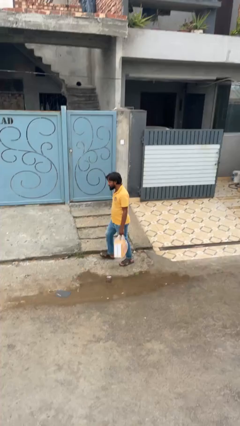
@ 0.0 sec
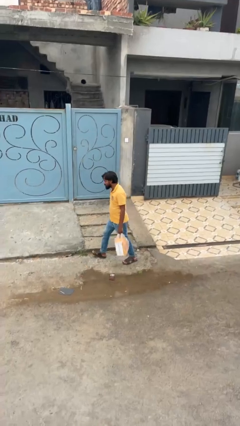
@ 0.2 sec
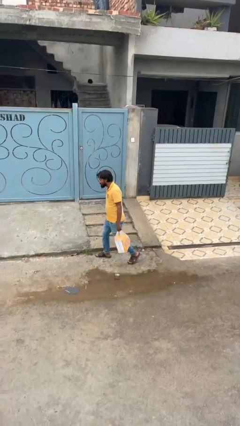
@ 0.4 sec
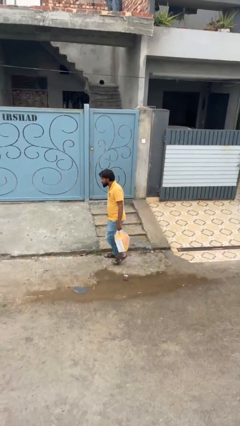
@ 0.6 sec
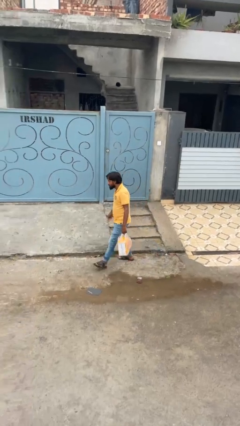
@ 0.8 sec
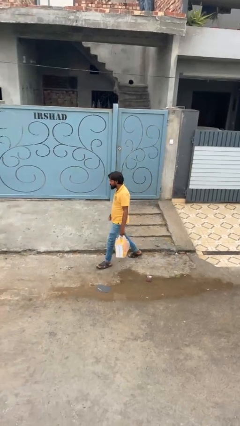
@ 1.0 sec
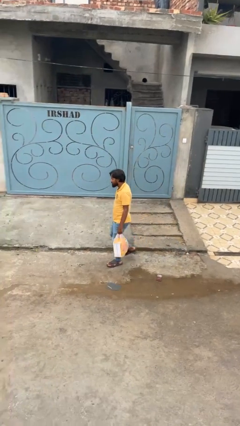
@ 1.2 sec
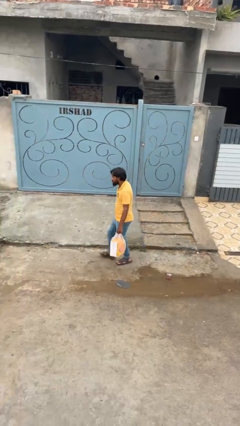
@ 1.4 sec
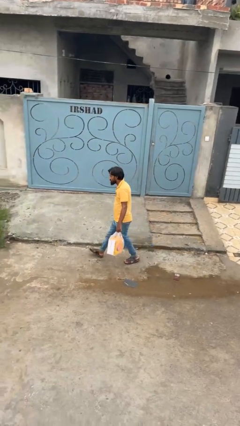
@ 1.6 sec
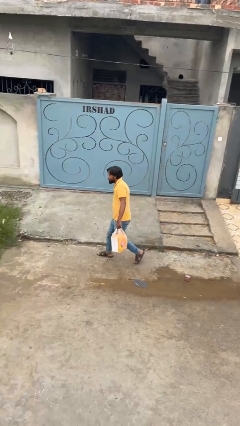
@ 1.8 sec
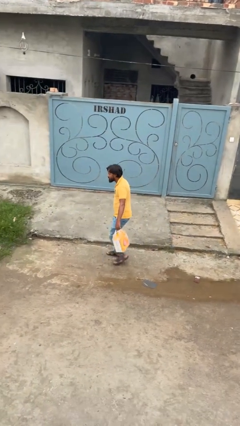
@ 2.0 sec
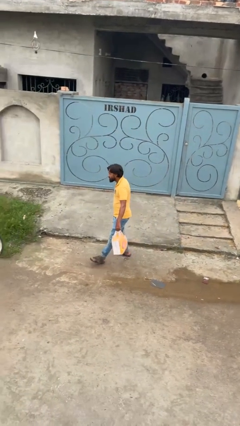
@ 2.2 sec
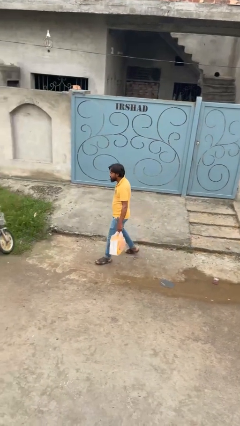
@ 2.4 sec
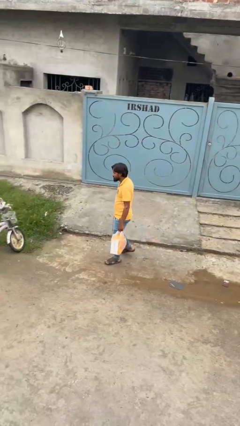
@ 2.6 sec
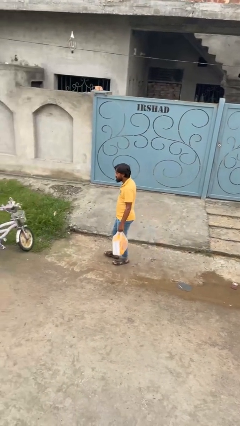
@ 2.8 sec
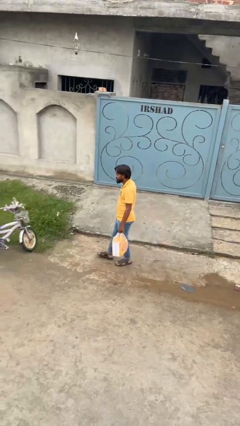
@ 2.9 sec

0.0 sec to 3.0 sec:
person carries groceries

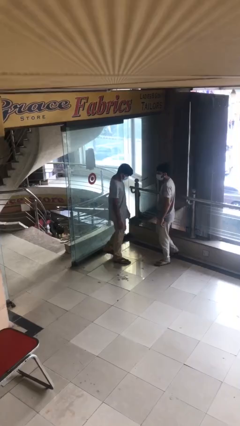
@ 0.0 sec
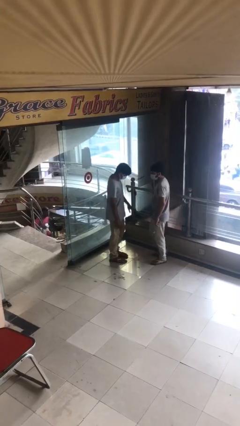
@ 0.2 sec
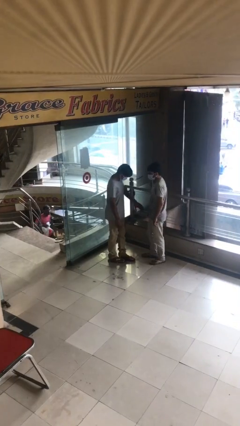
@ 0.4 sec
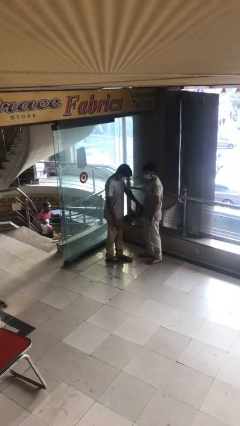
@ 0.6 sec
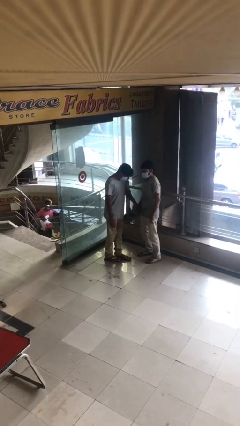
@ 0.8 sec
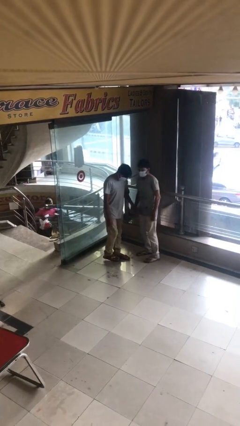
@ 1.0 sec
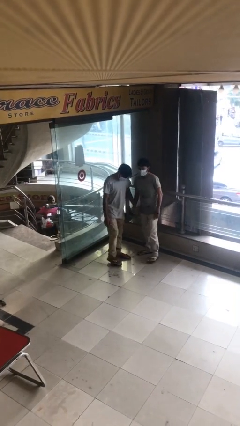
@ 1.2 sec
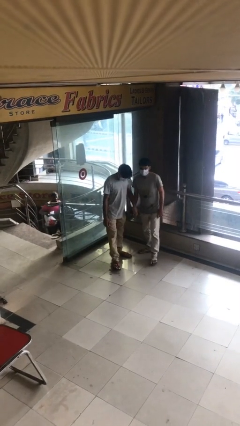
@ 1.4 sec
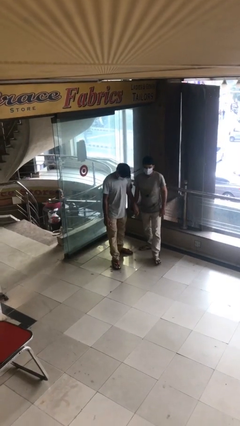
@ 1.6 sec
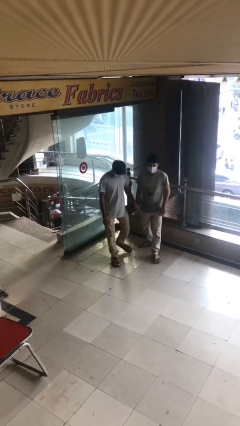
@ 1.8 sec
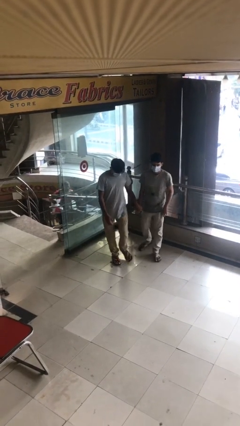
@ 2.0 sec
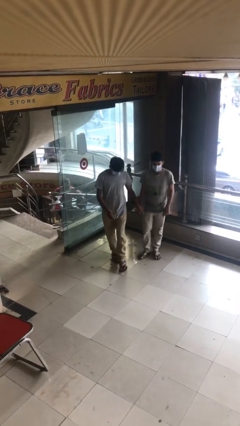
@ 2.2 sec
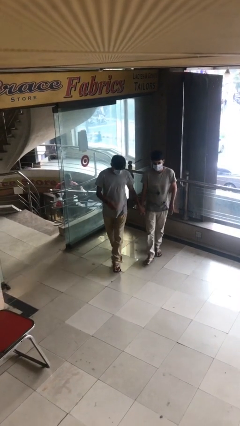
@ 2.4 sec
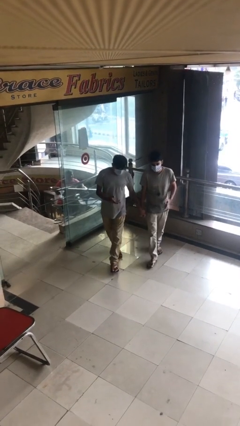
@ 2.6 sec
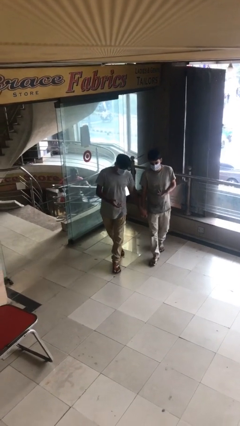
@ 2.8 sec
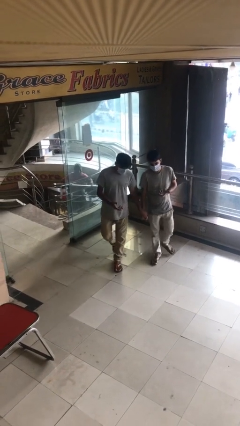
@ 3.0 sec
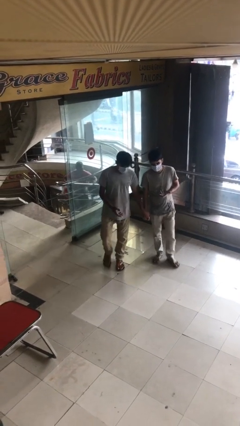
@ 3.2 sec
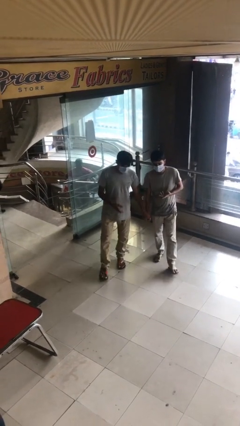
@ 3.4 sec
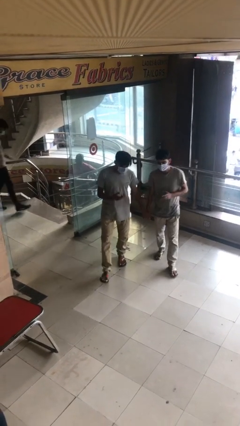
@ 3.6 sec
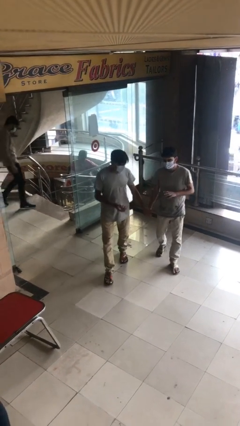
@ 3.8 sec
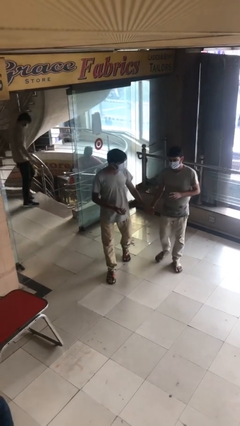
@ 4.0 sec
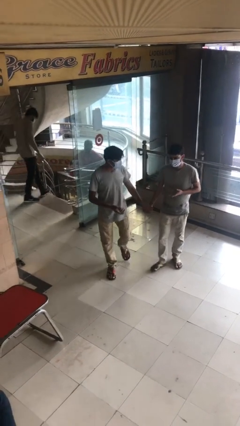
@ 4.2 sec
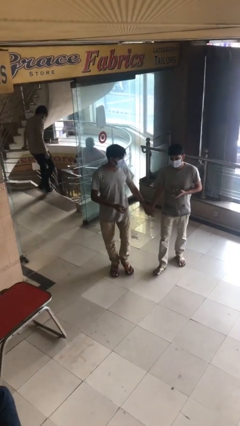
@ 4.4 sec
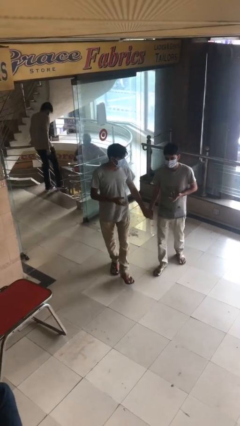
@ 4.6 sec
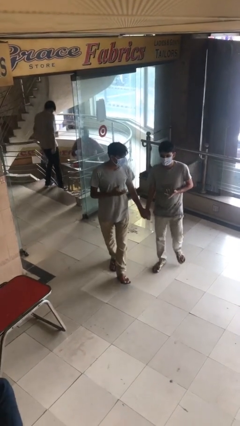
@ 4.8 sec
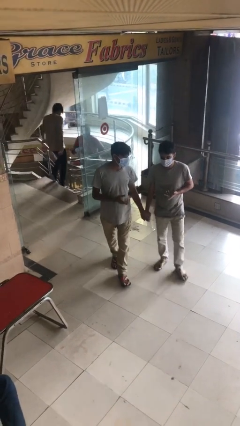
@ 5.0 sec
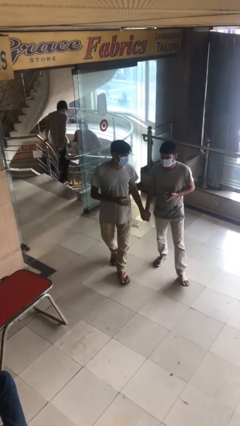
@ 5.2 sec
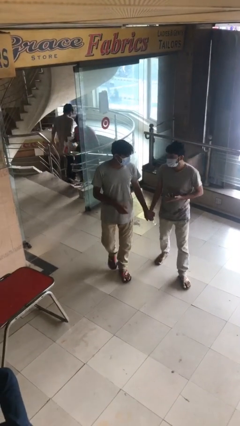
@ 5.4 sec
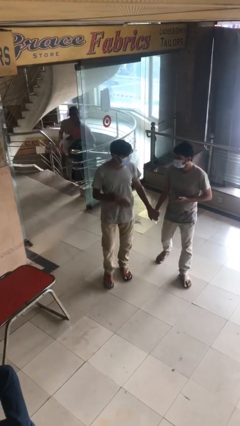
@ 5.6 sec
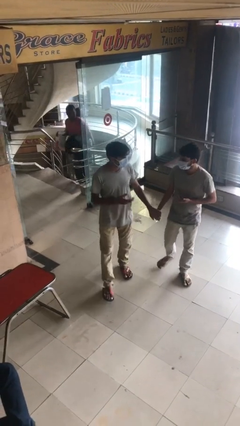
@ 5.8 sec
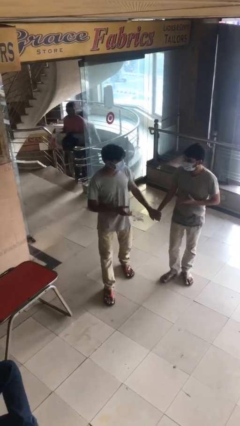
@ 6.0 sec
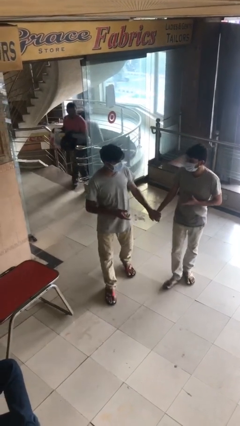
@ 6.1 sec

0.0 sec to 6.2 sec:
person holds hand

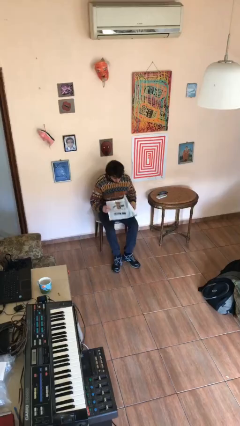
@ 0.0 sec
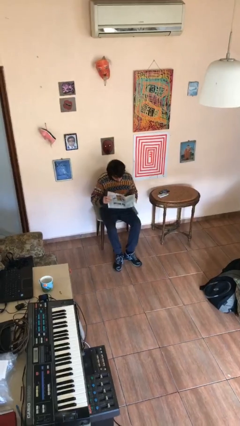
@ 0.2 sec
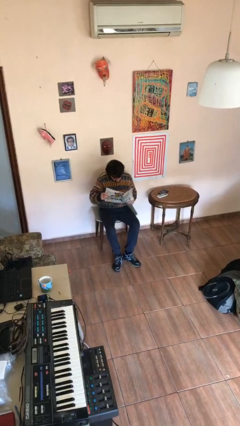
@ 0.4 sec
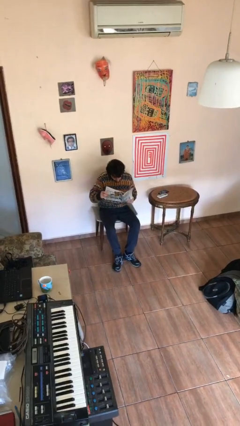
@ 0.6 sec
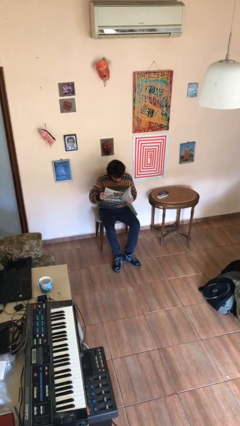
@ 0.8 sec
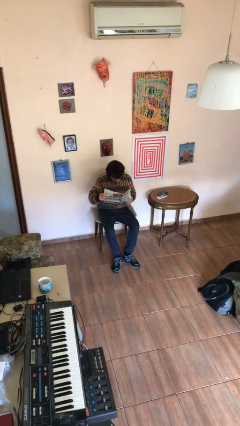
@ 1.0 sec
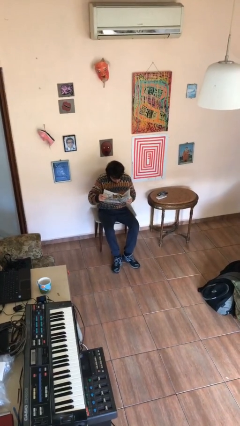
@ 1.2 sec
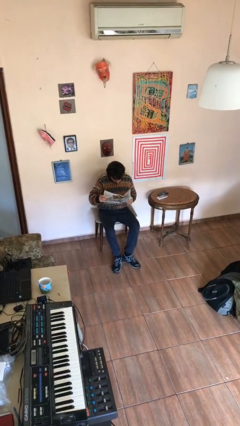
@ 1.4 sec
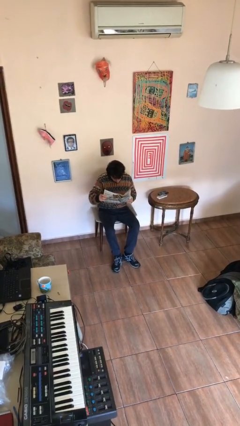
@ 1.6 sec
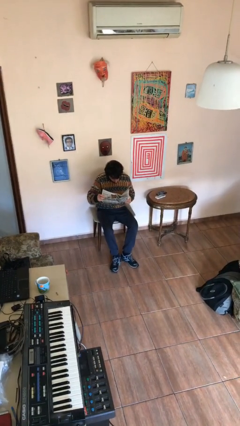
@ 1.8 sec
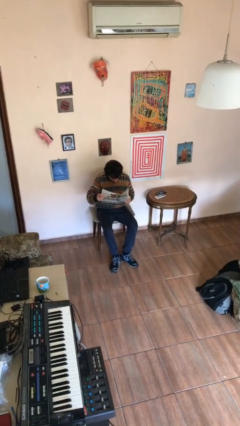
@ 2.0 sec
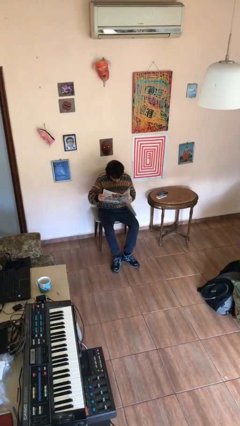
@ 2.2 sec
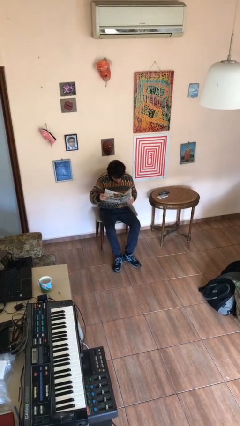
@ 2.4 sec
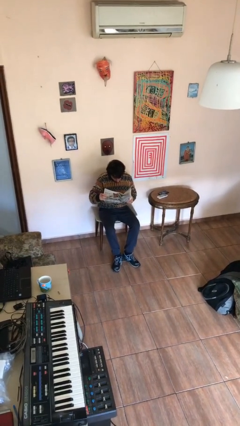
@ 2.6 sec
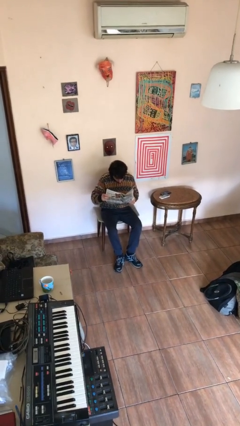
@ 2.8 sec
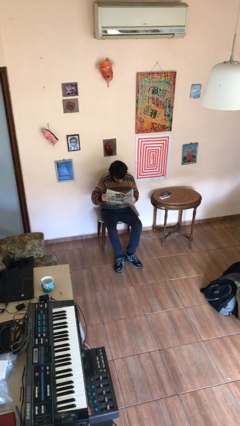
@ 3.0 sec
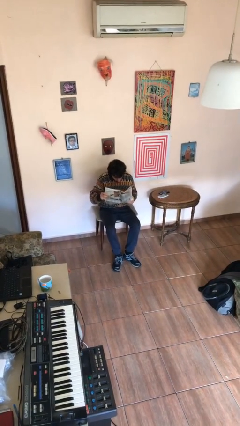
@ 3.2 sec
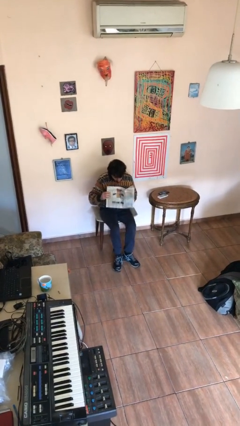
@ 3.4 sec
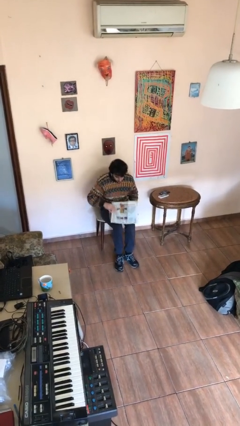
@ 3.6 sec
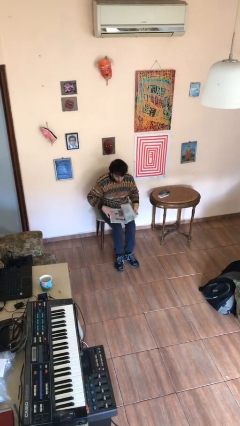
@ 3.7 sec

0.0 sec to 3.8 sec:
person reads newspaper

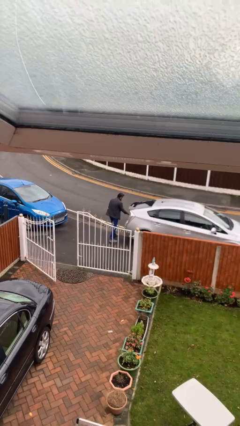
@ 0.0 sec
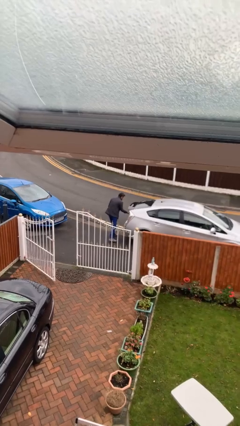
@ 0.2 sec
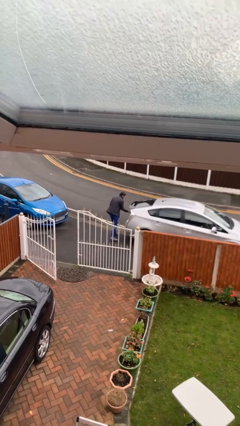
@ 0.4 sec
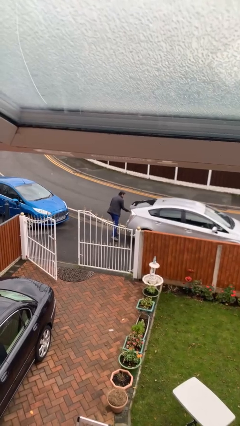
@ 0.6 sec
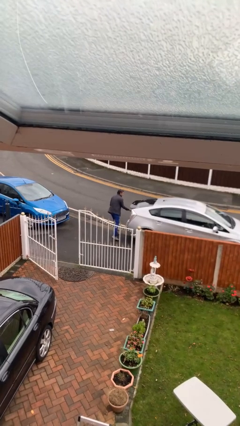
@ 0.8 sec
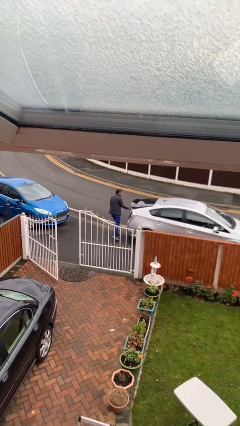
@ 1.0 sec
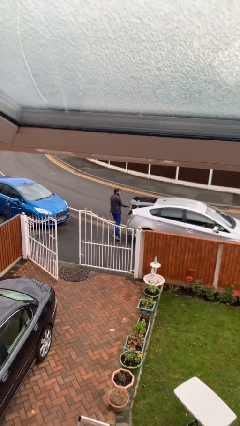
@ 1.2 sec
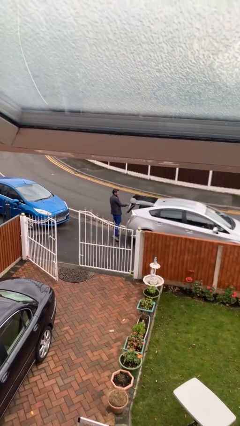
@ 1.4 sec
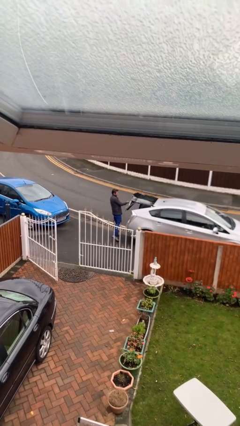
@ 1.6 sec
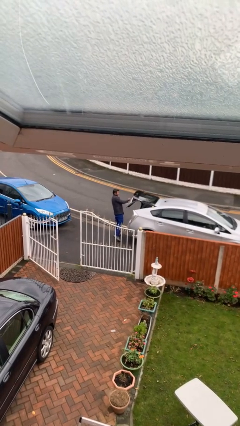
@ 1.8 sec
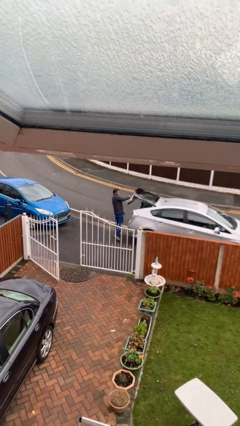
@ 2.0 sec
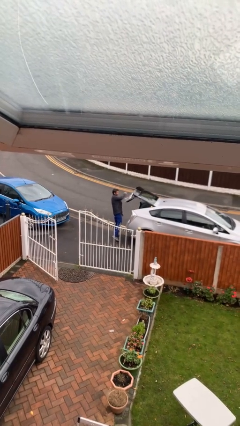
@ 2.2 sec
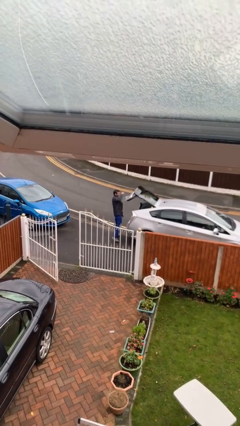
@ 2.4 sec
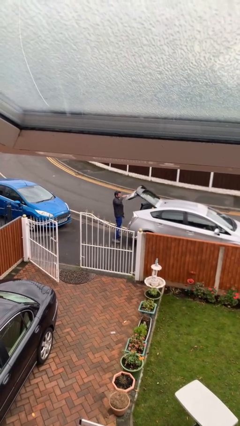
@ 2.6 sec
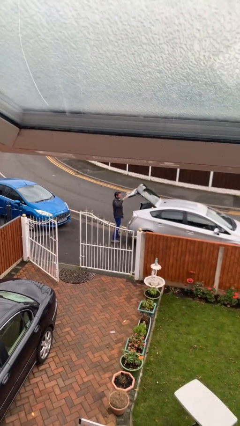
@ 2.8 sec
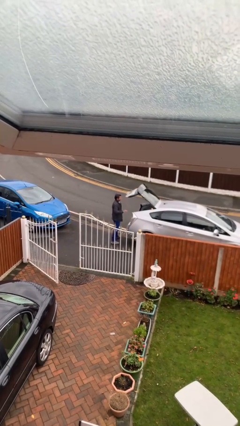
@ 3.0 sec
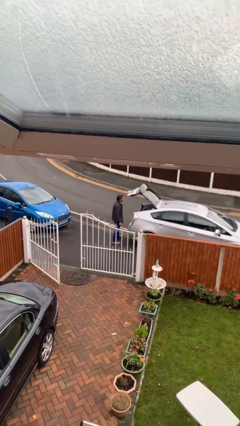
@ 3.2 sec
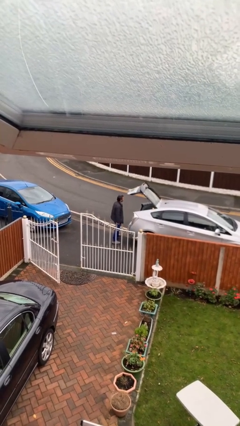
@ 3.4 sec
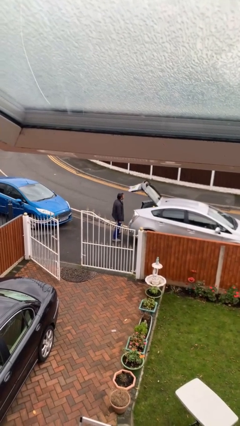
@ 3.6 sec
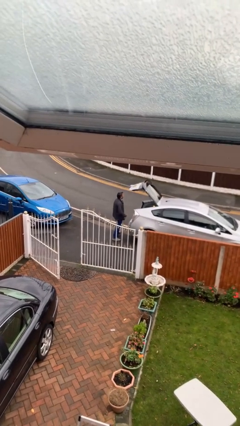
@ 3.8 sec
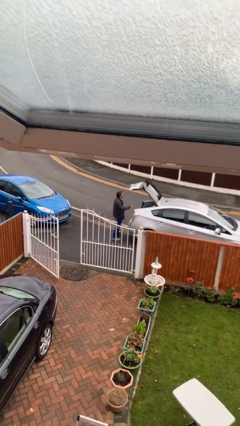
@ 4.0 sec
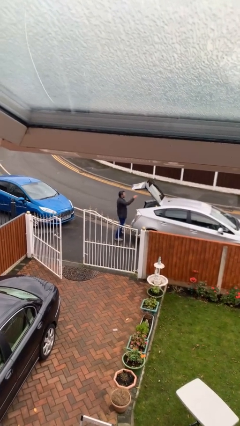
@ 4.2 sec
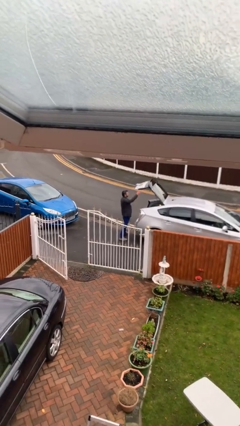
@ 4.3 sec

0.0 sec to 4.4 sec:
person opens car trunk
